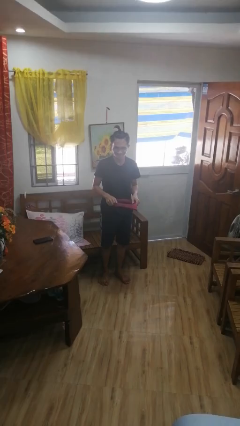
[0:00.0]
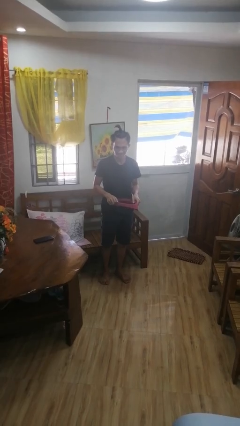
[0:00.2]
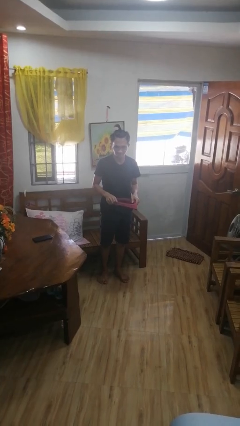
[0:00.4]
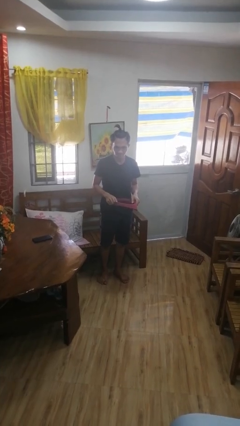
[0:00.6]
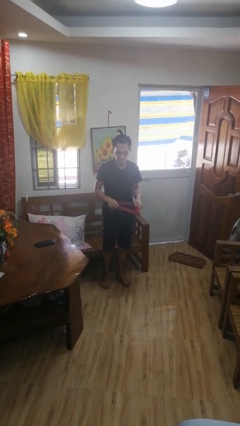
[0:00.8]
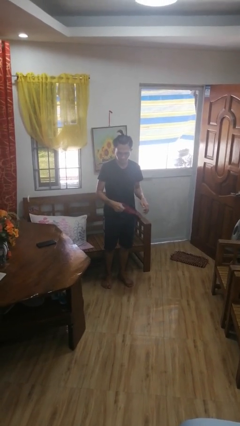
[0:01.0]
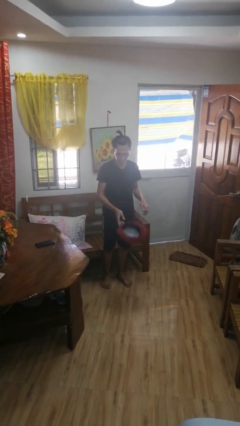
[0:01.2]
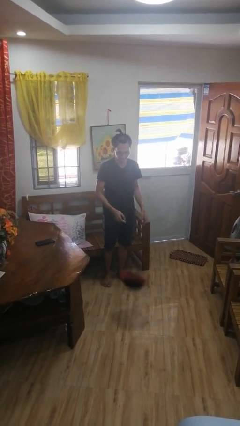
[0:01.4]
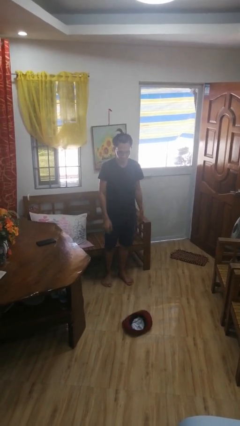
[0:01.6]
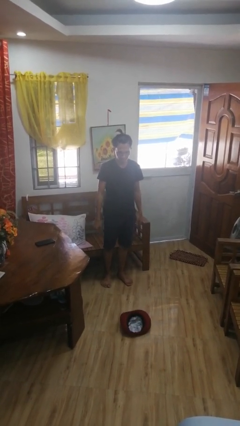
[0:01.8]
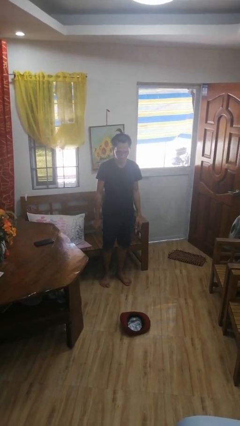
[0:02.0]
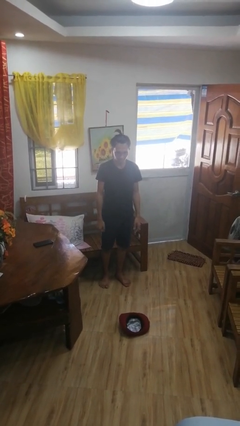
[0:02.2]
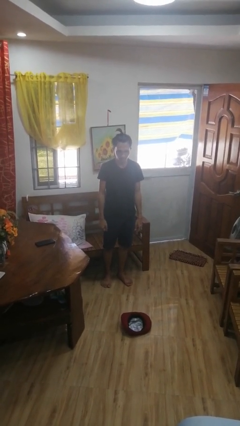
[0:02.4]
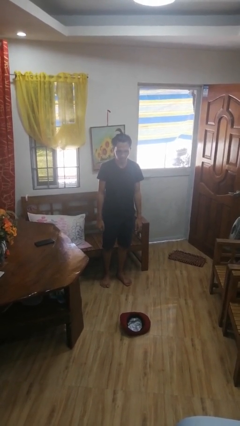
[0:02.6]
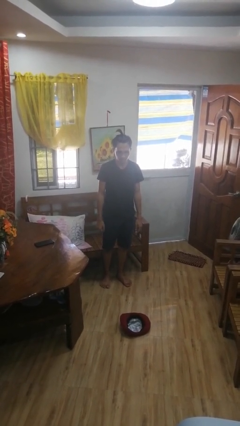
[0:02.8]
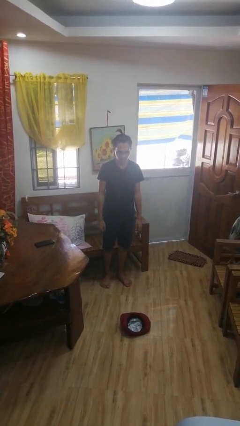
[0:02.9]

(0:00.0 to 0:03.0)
person throws object to ground

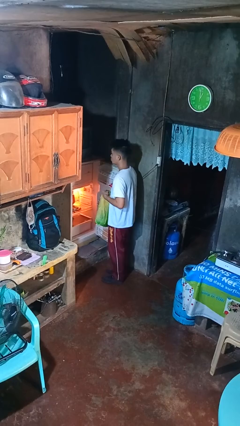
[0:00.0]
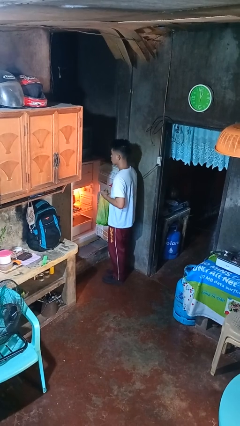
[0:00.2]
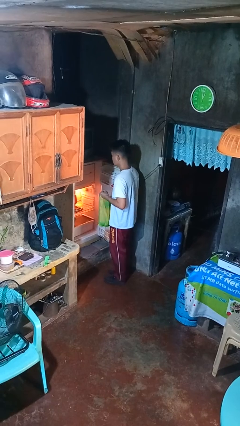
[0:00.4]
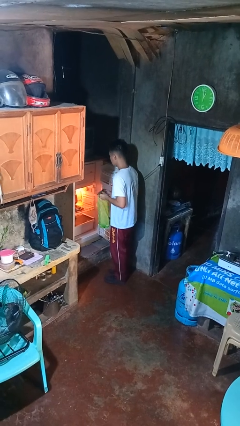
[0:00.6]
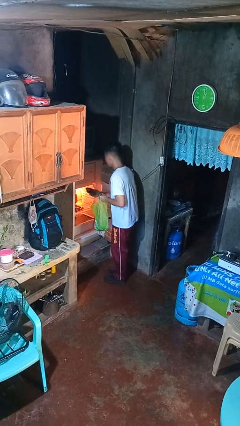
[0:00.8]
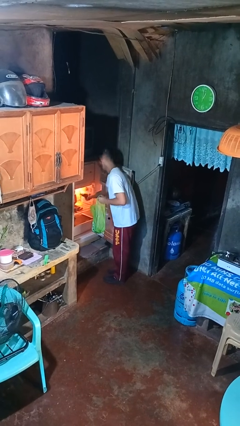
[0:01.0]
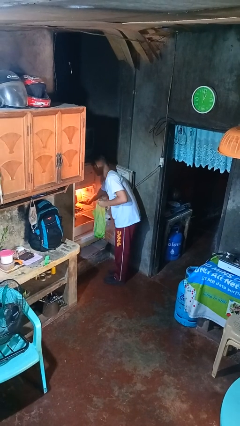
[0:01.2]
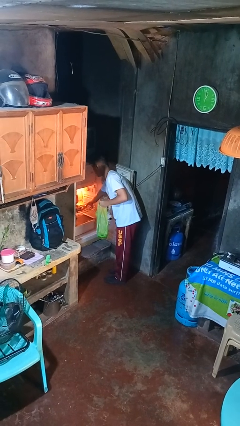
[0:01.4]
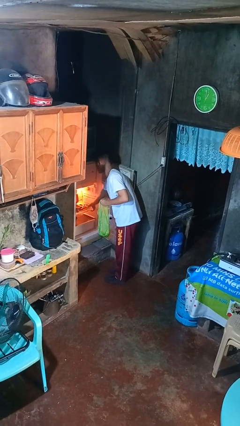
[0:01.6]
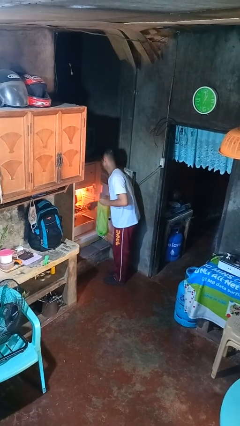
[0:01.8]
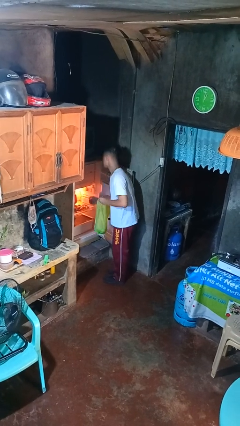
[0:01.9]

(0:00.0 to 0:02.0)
person loads groceries into refrigerator

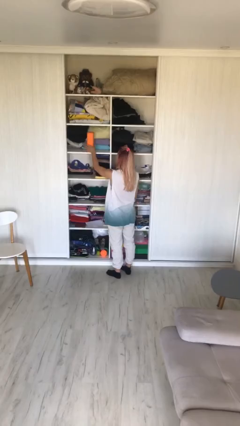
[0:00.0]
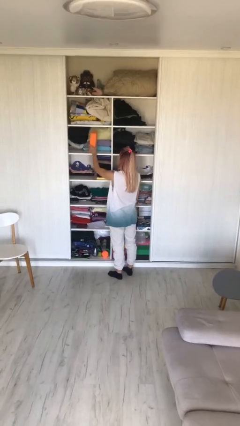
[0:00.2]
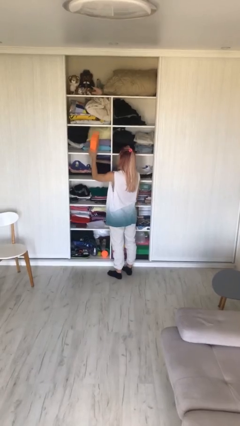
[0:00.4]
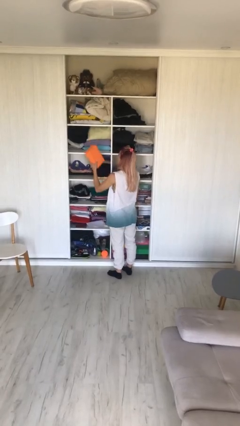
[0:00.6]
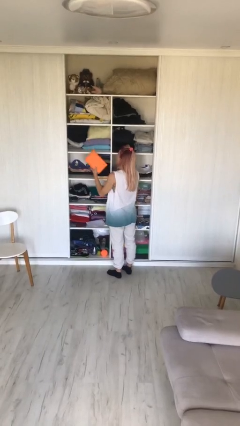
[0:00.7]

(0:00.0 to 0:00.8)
person picks up object from shelf

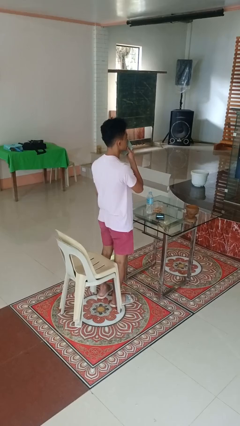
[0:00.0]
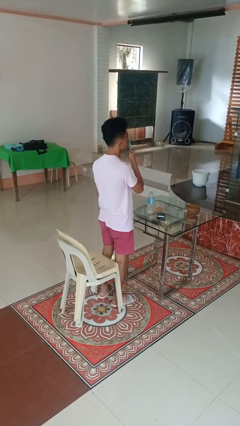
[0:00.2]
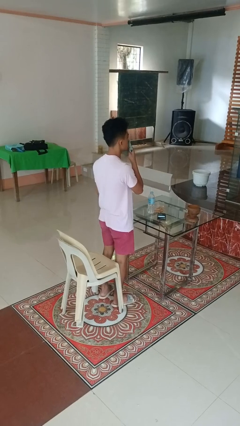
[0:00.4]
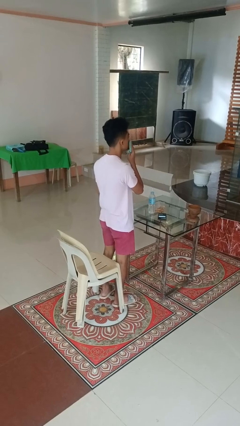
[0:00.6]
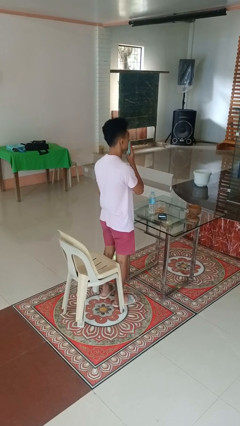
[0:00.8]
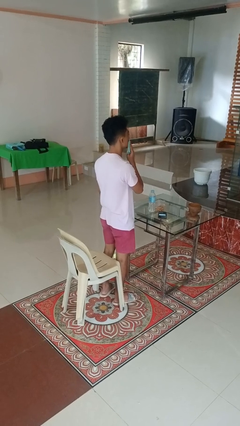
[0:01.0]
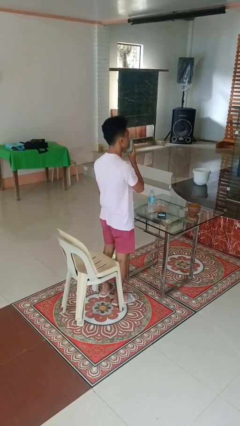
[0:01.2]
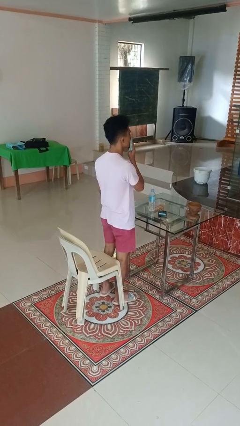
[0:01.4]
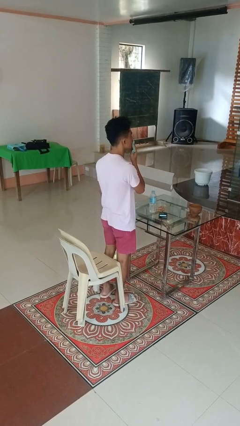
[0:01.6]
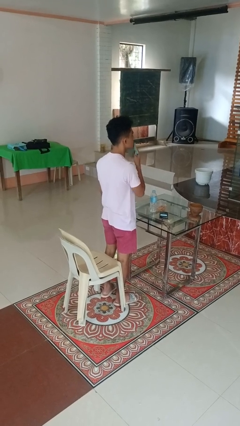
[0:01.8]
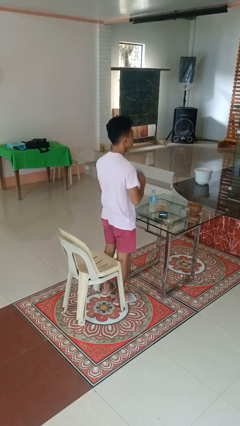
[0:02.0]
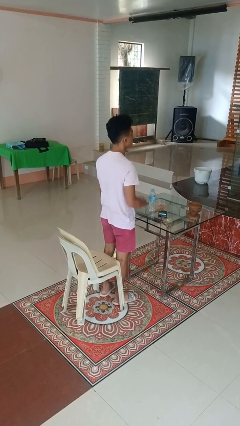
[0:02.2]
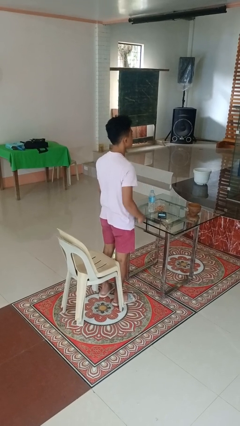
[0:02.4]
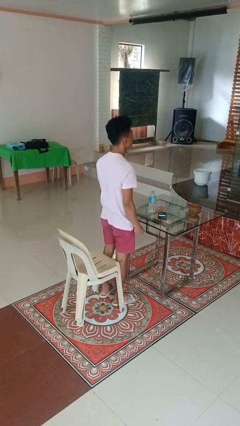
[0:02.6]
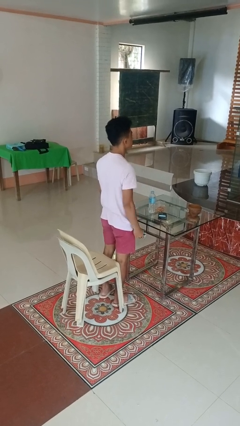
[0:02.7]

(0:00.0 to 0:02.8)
person wipes mouth with napkin

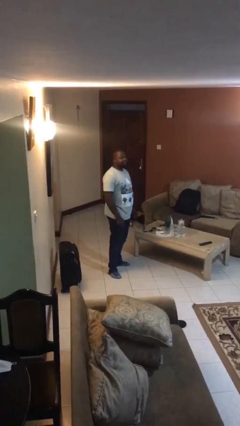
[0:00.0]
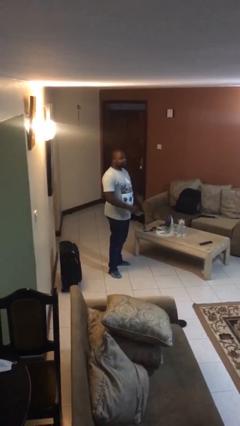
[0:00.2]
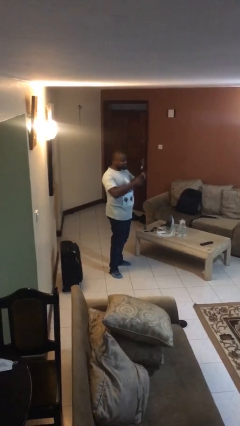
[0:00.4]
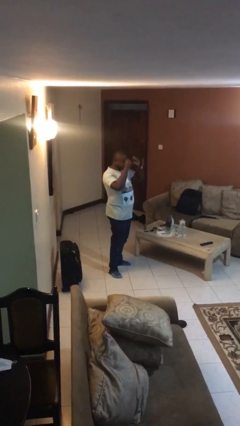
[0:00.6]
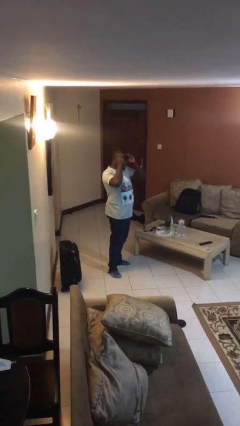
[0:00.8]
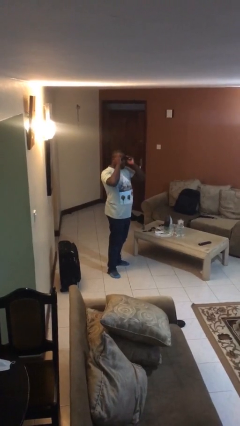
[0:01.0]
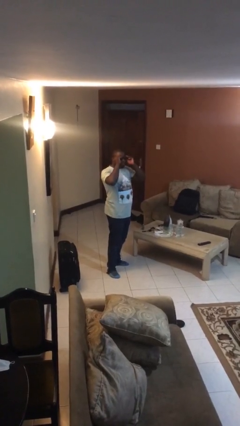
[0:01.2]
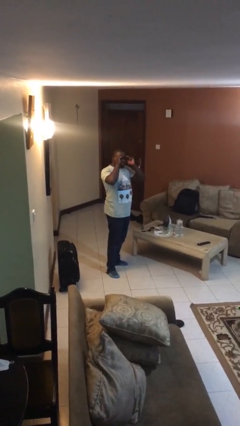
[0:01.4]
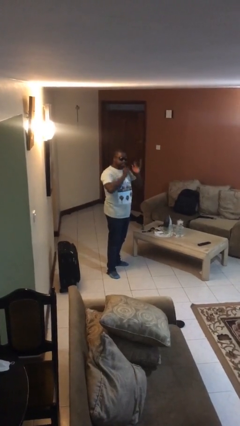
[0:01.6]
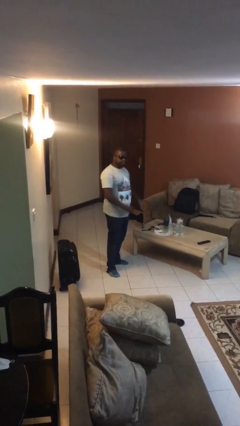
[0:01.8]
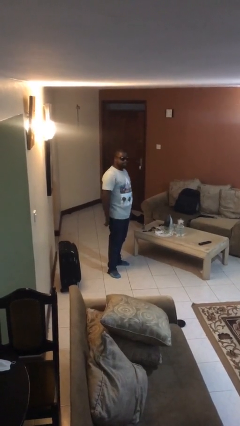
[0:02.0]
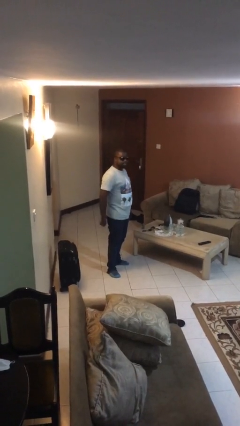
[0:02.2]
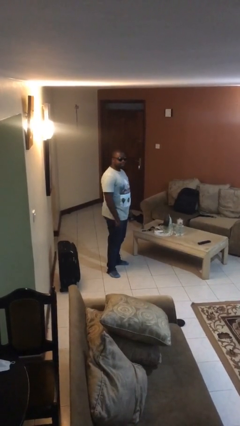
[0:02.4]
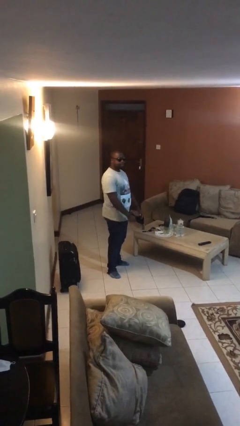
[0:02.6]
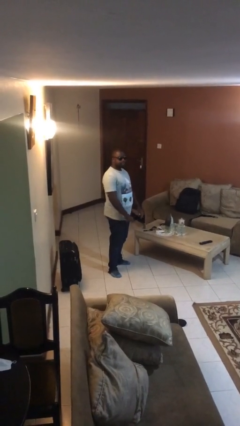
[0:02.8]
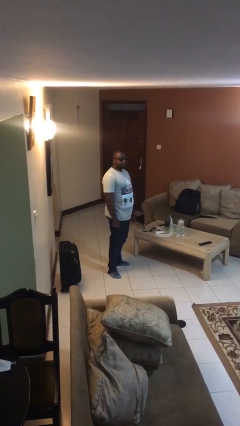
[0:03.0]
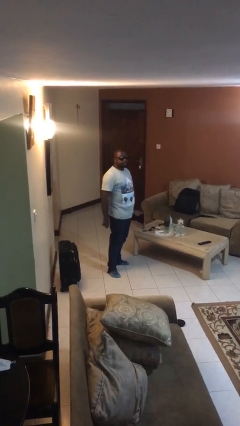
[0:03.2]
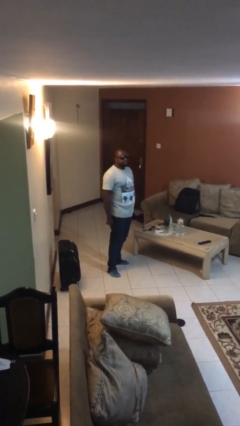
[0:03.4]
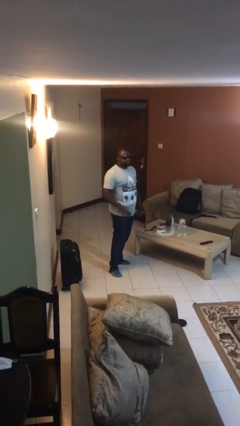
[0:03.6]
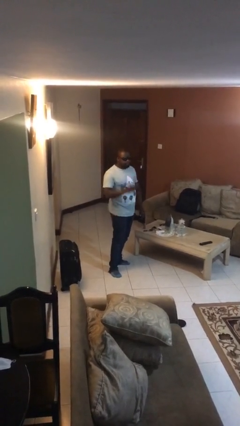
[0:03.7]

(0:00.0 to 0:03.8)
person puts on sunglasses

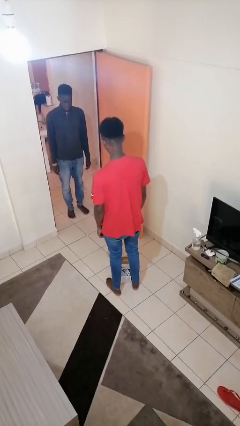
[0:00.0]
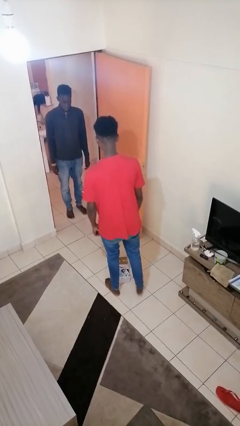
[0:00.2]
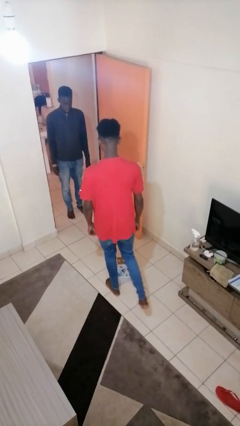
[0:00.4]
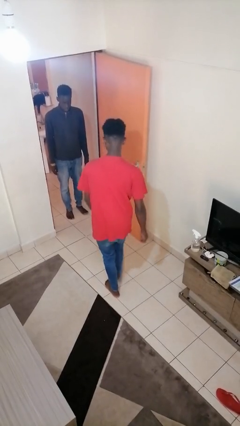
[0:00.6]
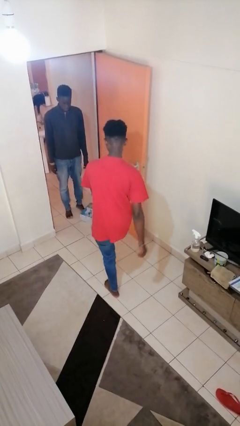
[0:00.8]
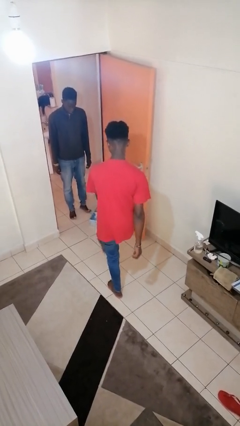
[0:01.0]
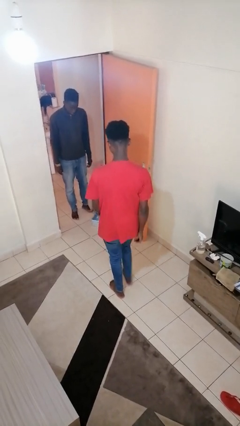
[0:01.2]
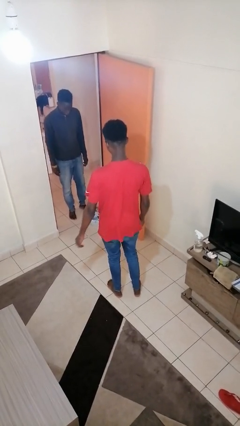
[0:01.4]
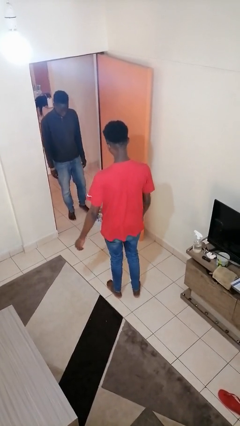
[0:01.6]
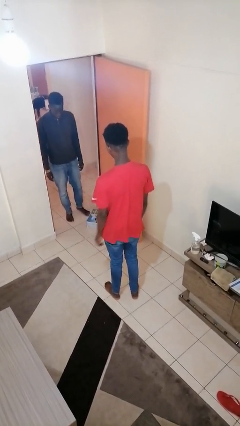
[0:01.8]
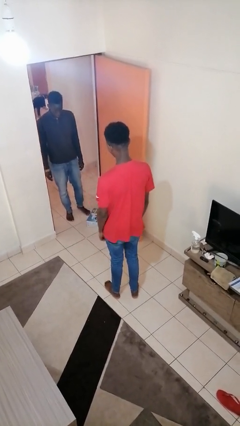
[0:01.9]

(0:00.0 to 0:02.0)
person kicks object to person

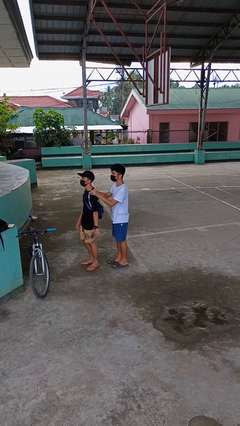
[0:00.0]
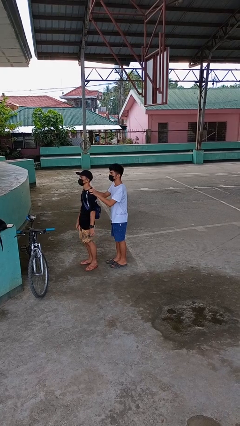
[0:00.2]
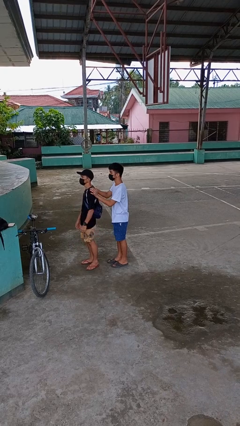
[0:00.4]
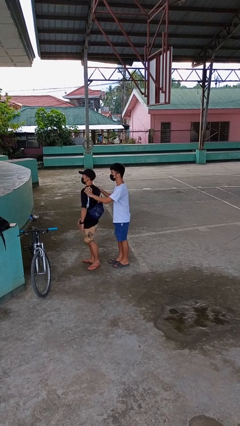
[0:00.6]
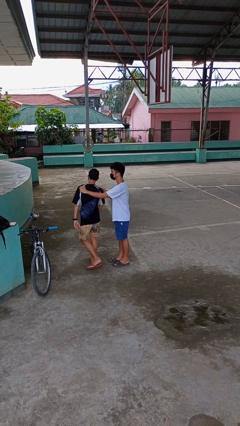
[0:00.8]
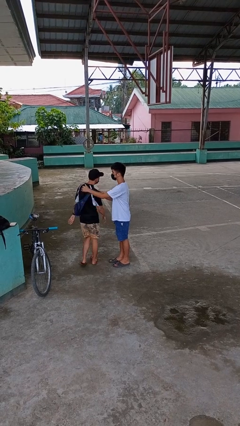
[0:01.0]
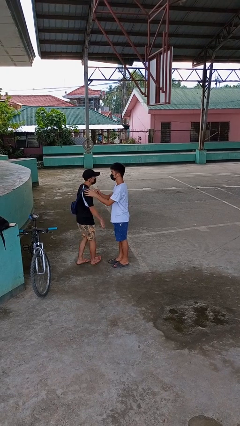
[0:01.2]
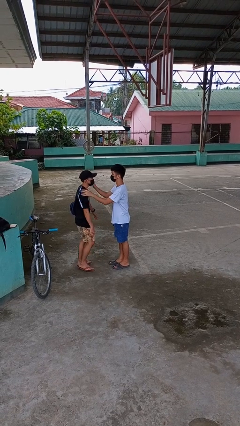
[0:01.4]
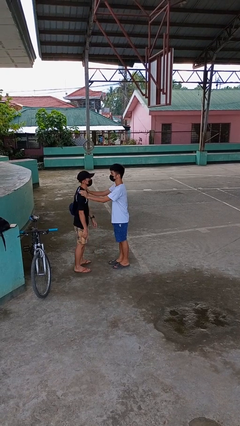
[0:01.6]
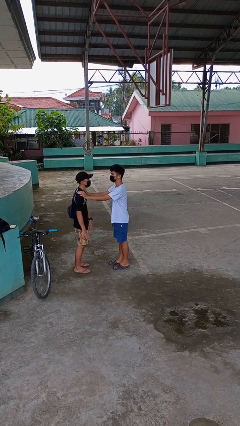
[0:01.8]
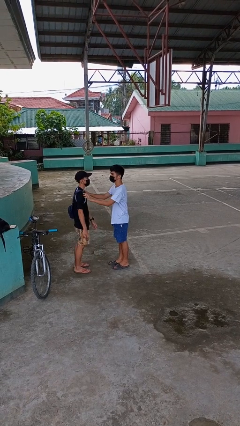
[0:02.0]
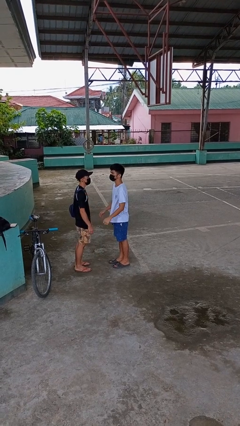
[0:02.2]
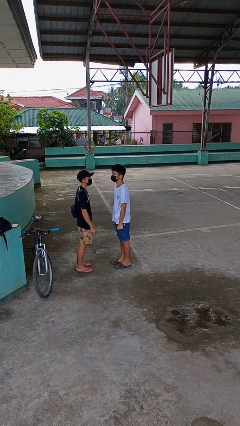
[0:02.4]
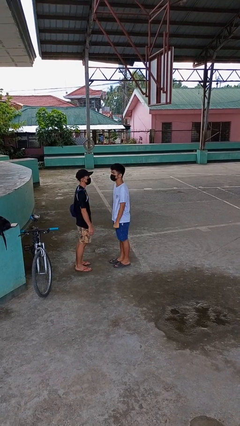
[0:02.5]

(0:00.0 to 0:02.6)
person spins person around
